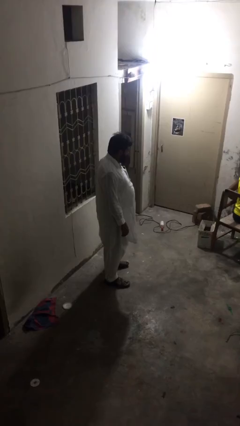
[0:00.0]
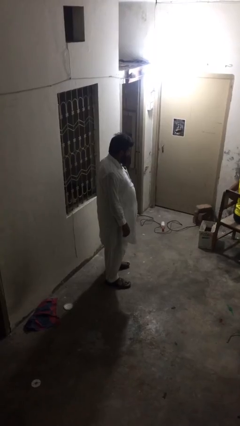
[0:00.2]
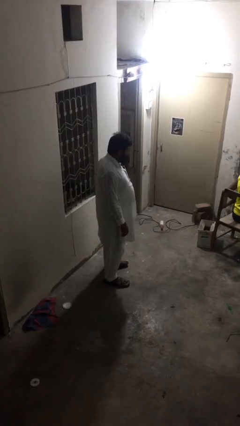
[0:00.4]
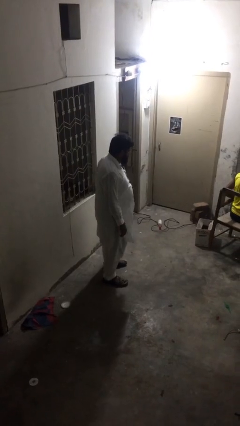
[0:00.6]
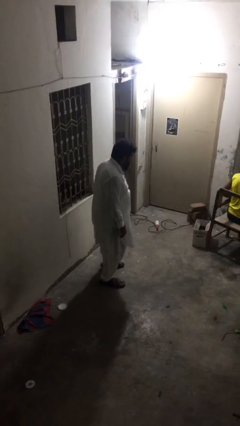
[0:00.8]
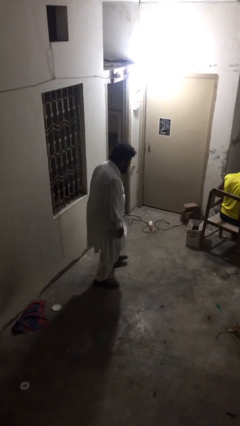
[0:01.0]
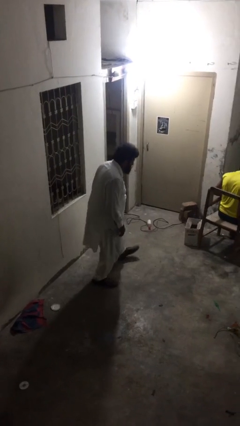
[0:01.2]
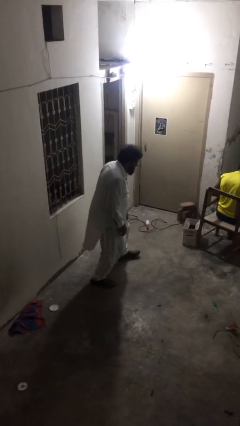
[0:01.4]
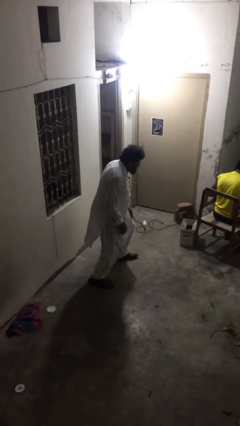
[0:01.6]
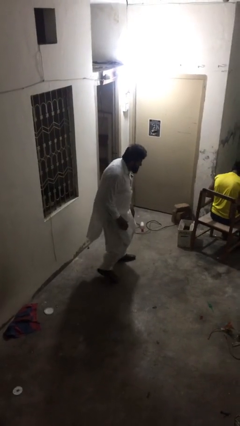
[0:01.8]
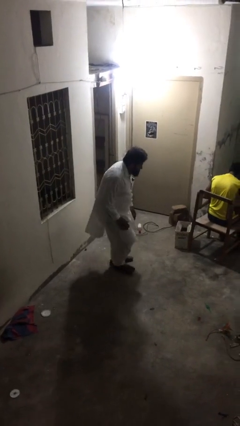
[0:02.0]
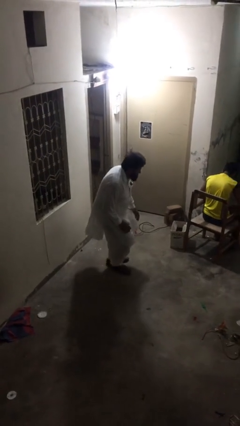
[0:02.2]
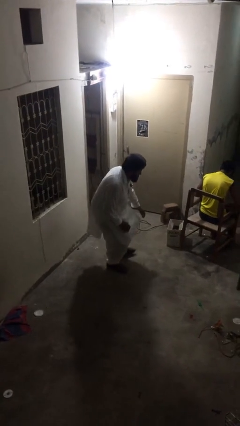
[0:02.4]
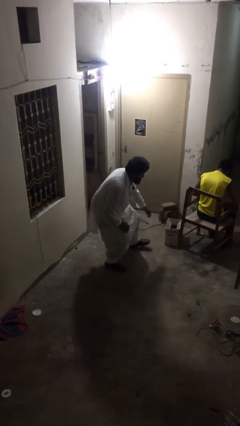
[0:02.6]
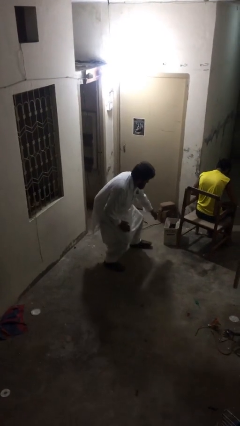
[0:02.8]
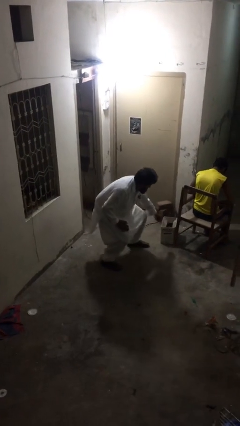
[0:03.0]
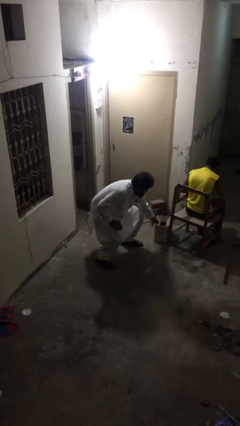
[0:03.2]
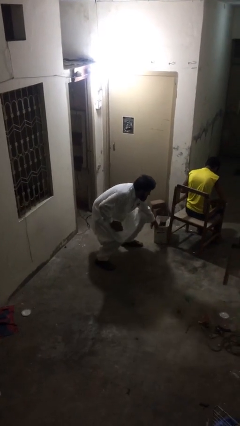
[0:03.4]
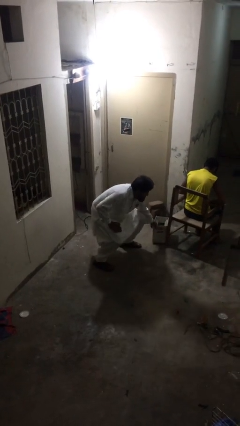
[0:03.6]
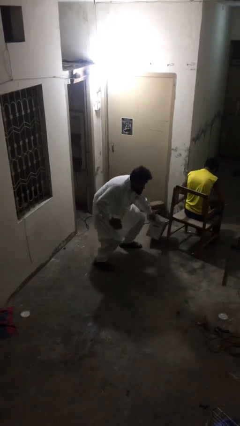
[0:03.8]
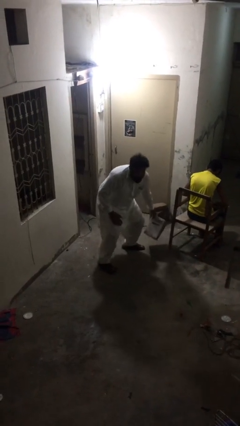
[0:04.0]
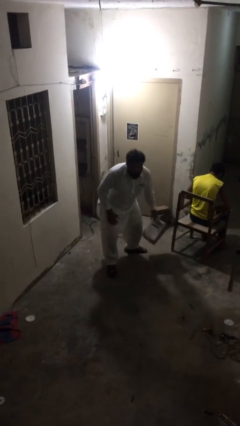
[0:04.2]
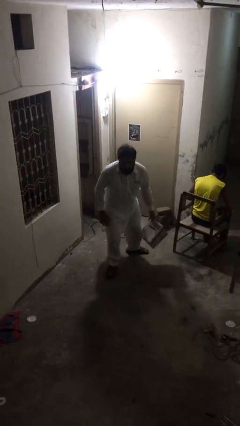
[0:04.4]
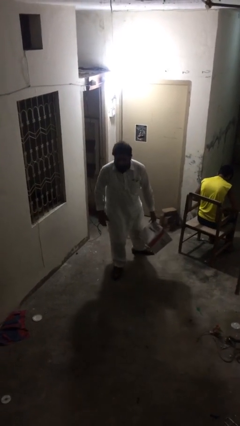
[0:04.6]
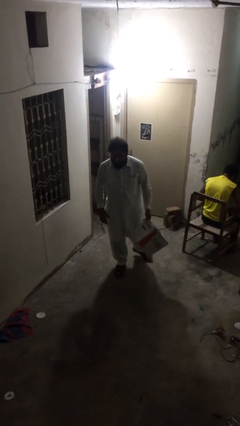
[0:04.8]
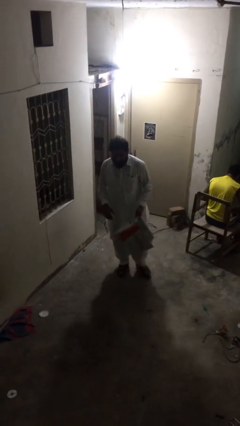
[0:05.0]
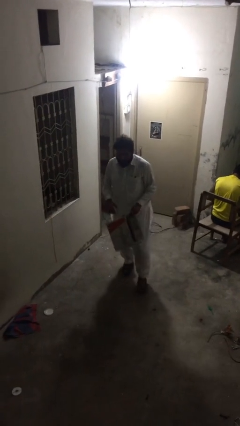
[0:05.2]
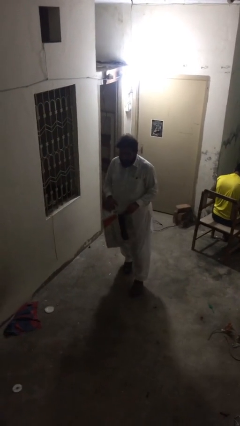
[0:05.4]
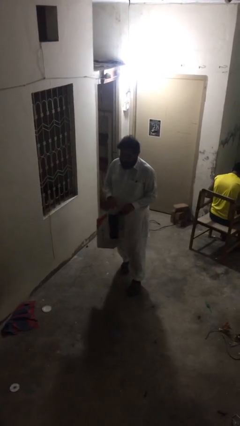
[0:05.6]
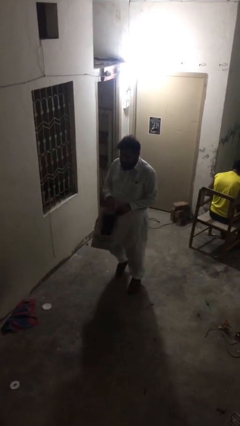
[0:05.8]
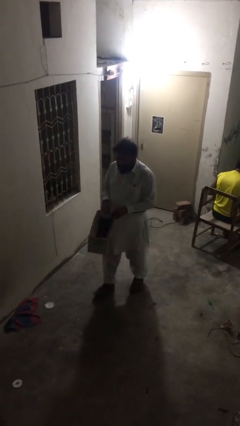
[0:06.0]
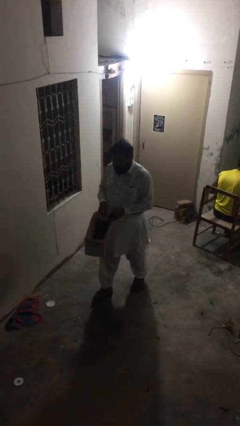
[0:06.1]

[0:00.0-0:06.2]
person steals object from person

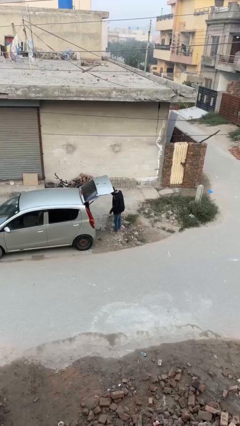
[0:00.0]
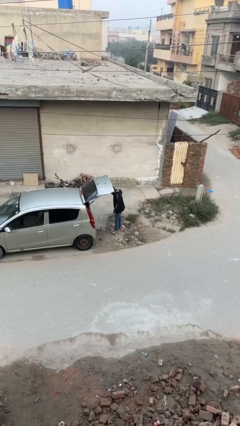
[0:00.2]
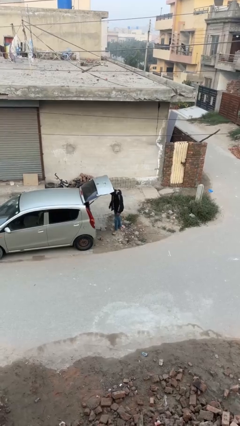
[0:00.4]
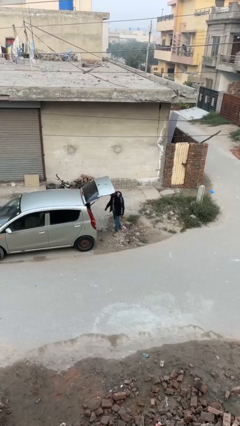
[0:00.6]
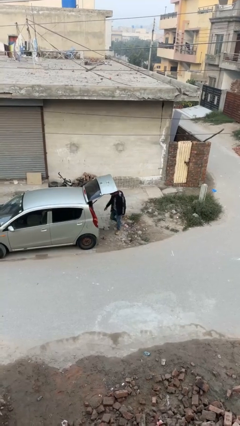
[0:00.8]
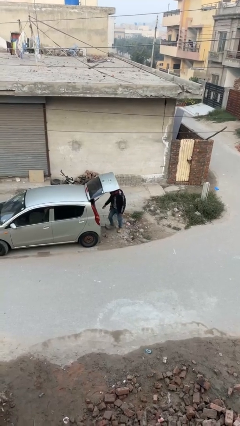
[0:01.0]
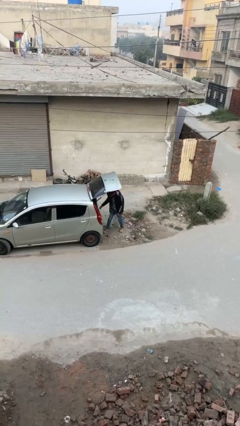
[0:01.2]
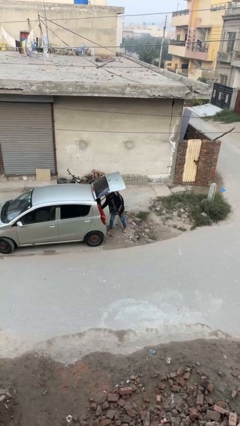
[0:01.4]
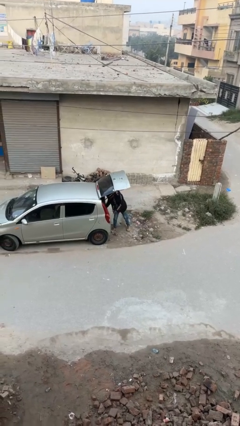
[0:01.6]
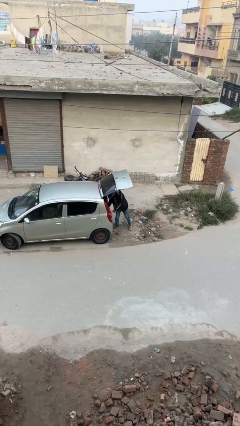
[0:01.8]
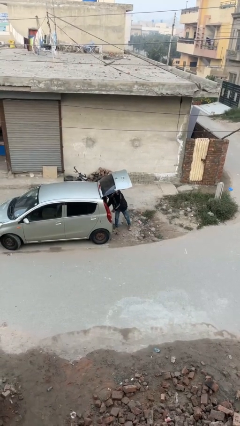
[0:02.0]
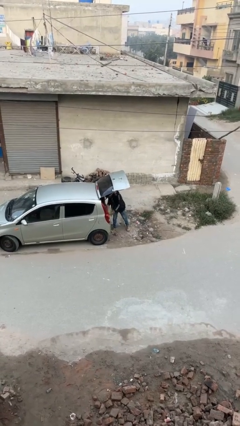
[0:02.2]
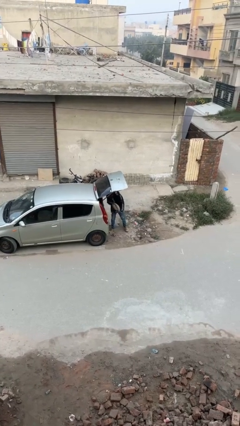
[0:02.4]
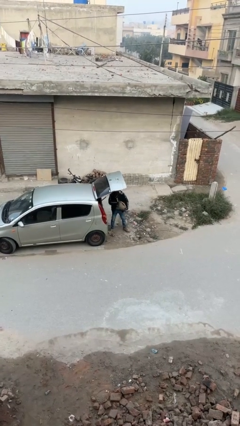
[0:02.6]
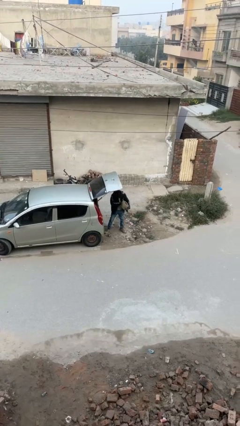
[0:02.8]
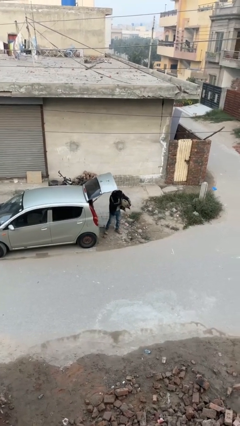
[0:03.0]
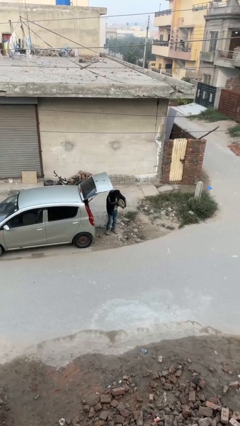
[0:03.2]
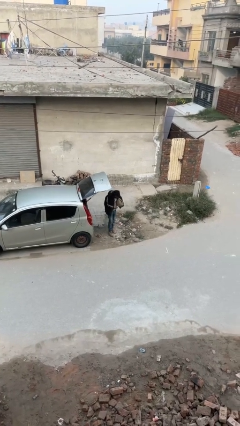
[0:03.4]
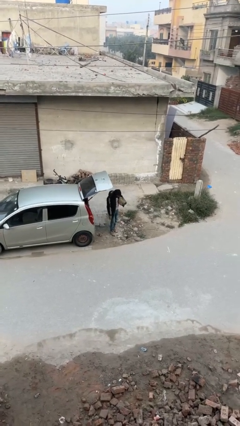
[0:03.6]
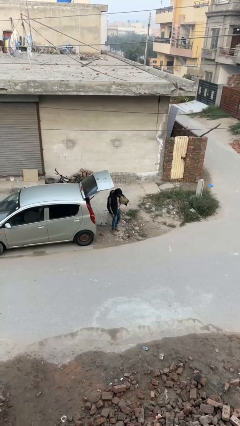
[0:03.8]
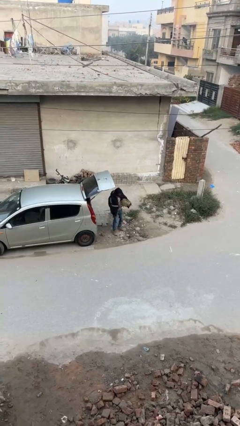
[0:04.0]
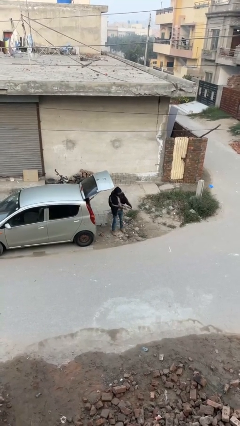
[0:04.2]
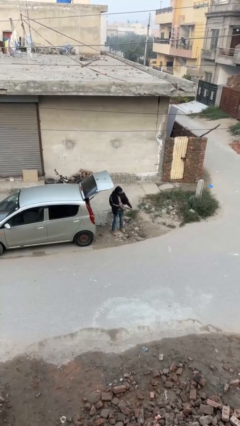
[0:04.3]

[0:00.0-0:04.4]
person unloads car

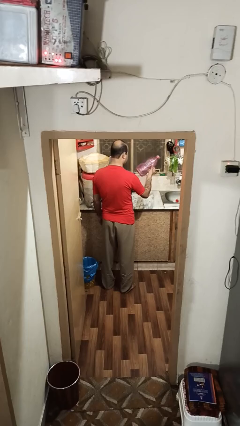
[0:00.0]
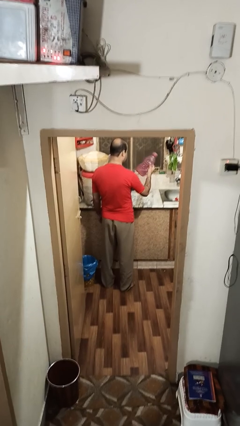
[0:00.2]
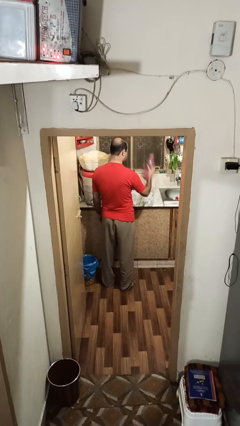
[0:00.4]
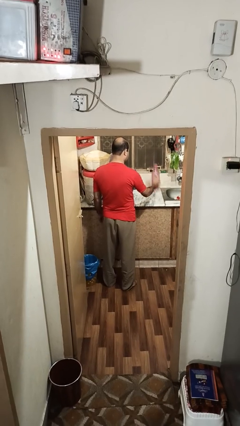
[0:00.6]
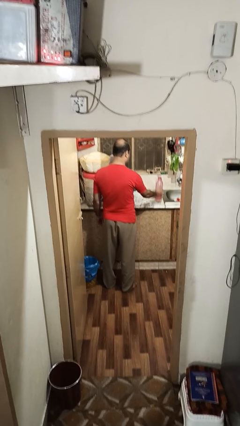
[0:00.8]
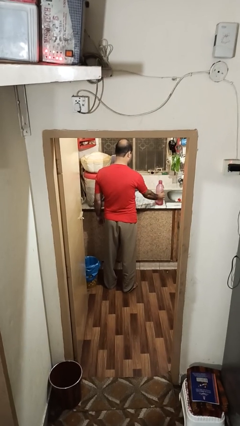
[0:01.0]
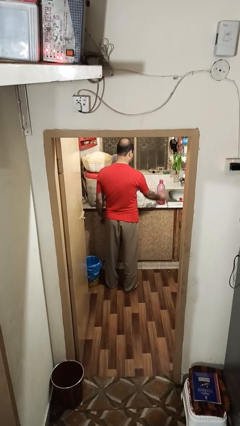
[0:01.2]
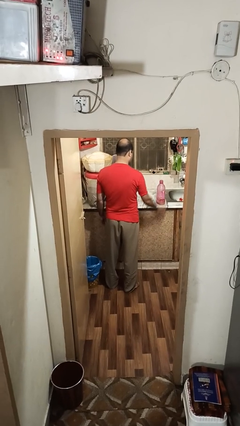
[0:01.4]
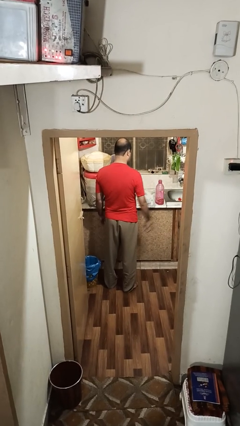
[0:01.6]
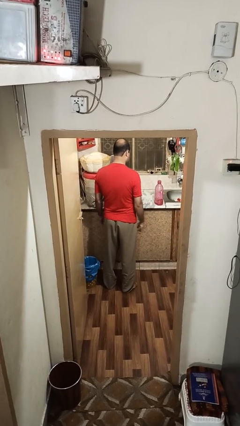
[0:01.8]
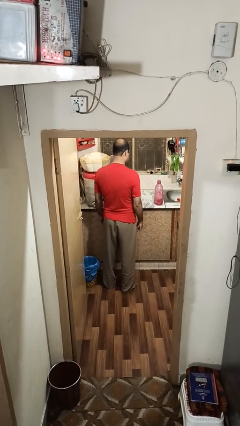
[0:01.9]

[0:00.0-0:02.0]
person puts down object on countertop

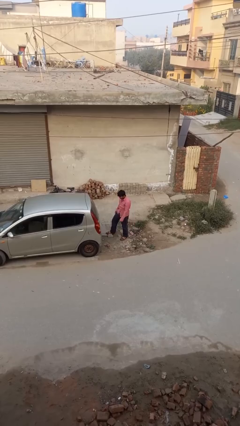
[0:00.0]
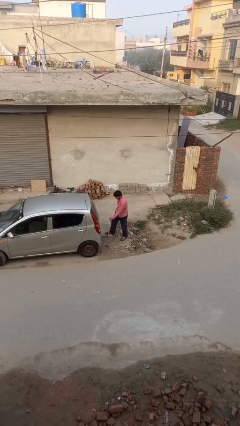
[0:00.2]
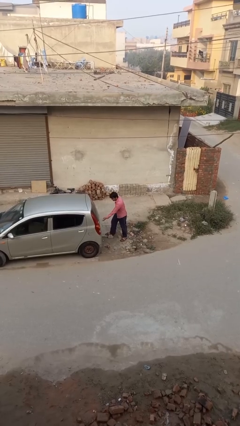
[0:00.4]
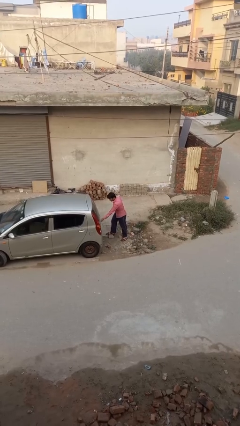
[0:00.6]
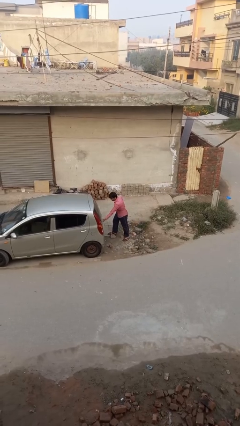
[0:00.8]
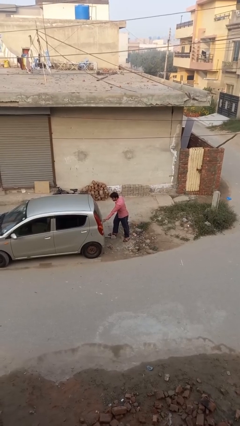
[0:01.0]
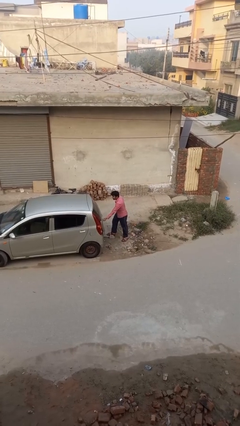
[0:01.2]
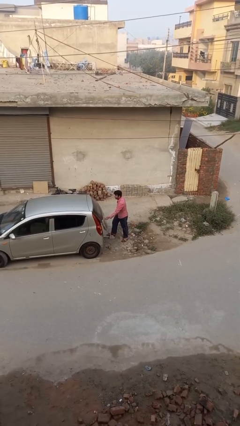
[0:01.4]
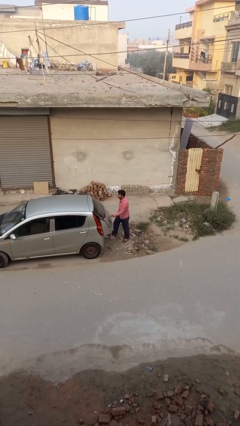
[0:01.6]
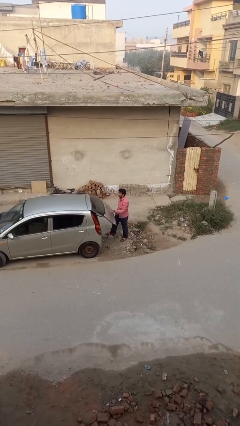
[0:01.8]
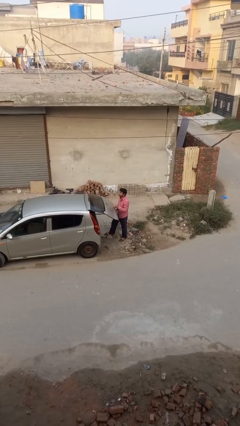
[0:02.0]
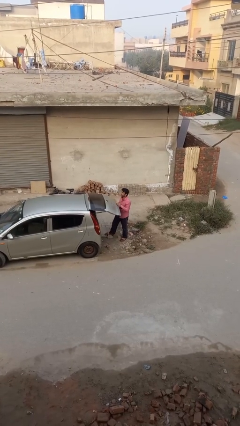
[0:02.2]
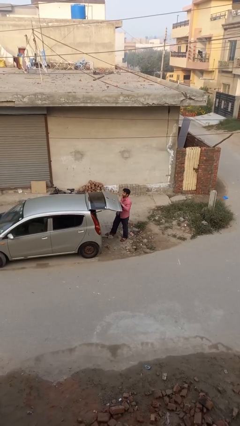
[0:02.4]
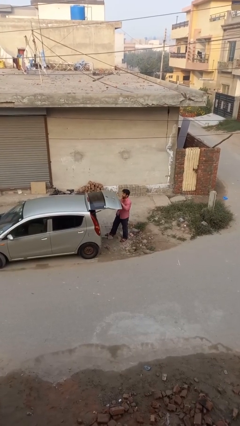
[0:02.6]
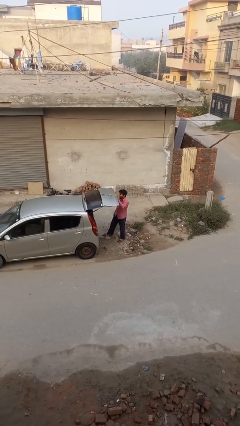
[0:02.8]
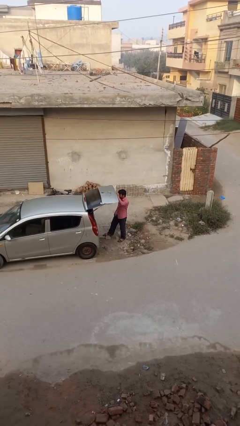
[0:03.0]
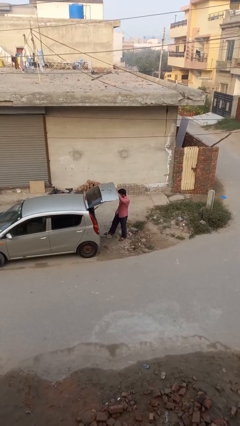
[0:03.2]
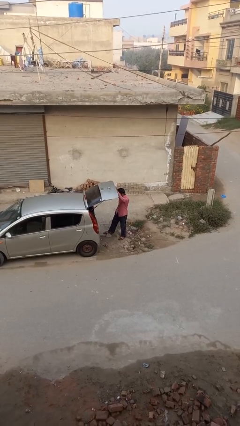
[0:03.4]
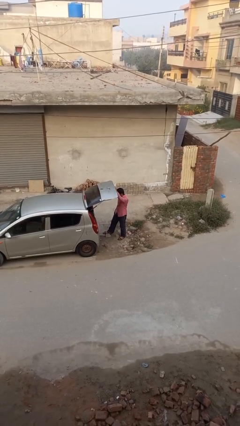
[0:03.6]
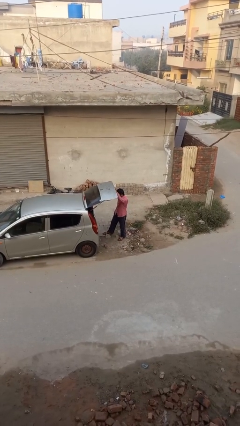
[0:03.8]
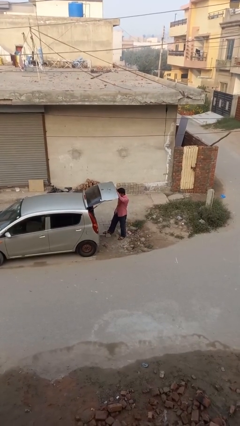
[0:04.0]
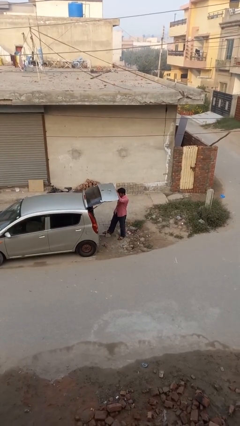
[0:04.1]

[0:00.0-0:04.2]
person opens car trunk

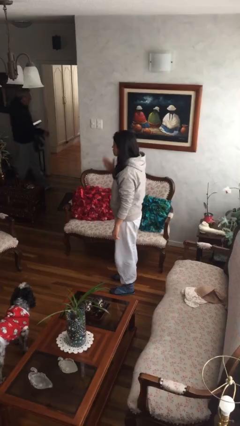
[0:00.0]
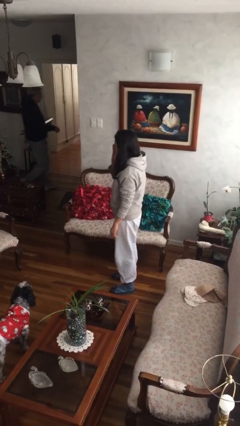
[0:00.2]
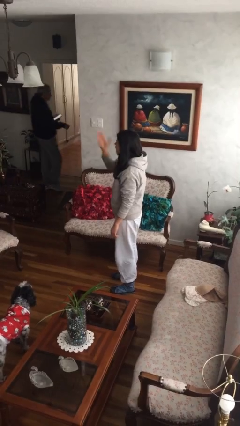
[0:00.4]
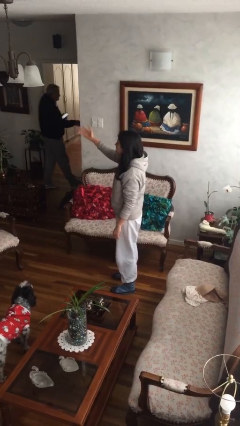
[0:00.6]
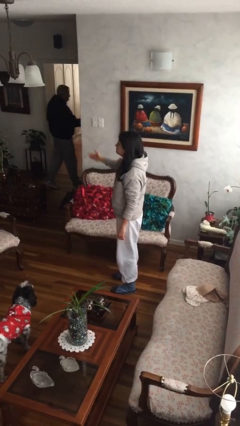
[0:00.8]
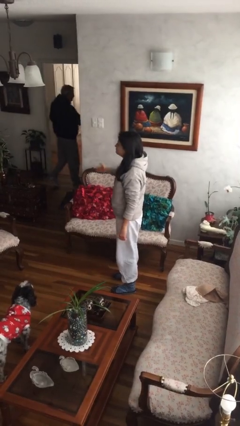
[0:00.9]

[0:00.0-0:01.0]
person gestures blow kiss
